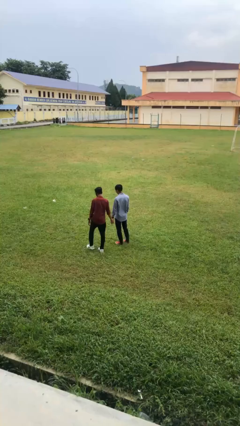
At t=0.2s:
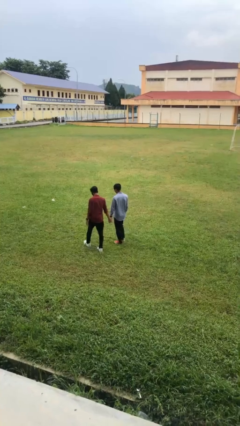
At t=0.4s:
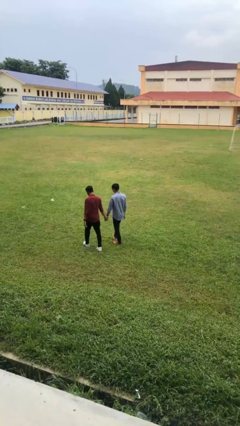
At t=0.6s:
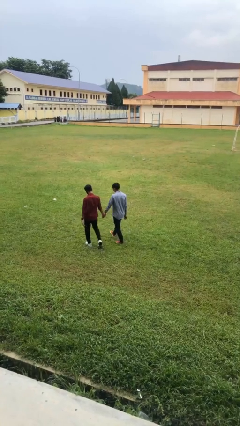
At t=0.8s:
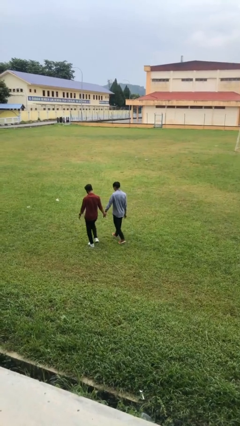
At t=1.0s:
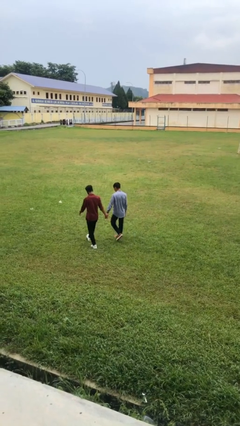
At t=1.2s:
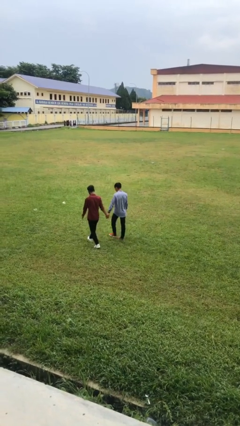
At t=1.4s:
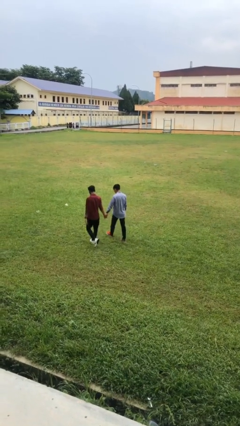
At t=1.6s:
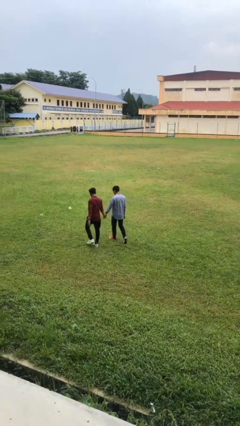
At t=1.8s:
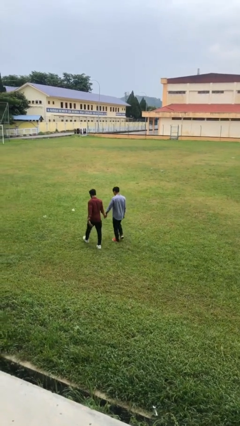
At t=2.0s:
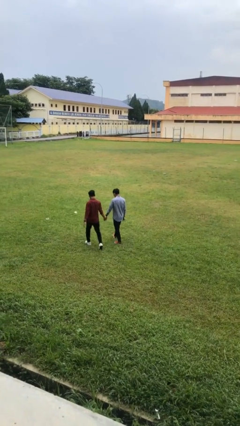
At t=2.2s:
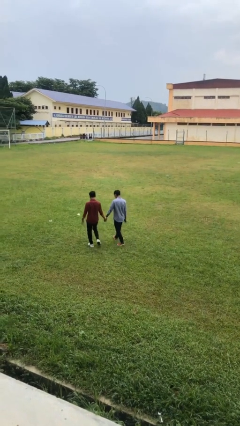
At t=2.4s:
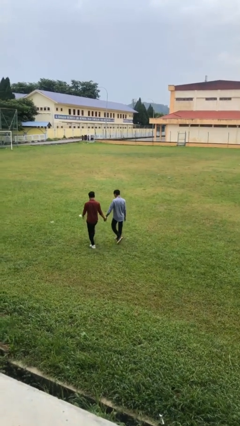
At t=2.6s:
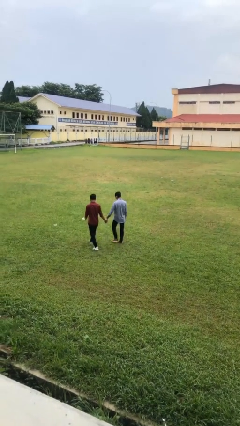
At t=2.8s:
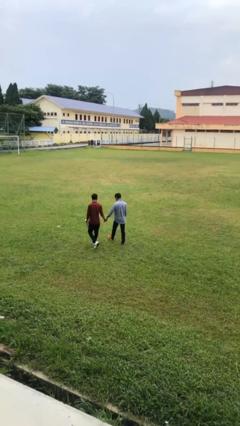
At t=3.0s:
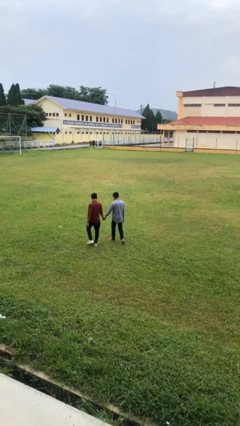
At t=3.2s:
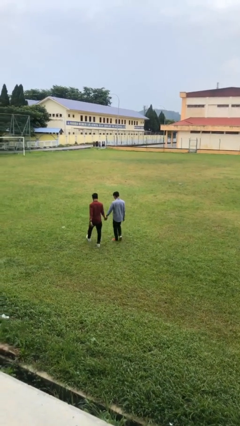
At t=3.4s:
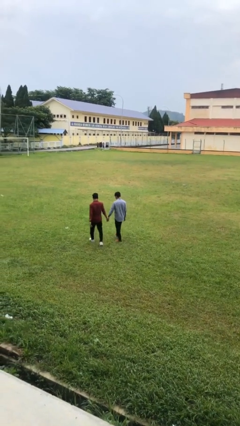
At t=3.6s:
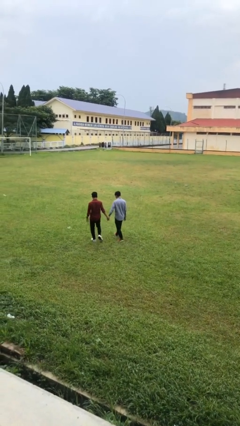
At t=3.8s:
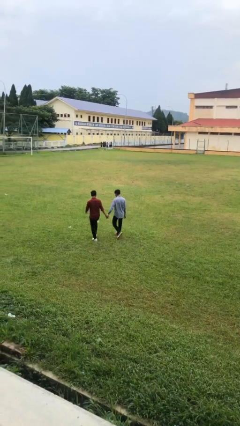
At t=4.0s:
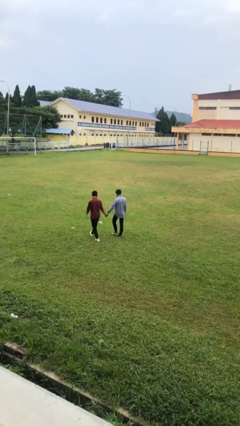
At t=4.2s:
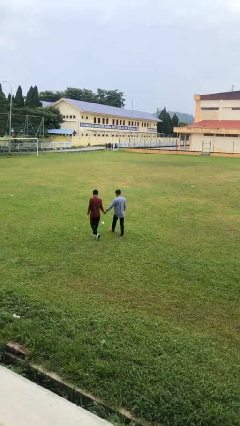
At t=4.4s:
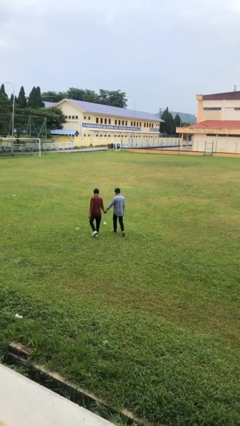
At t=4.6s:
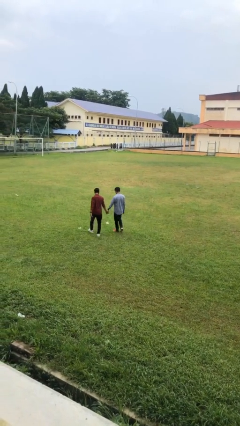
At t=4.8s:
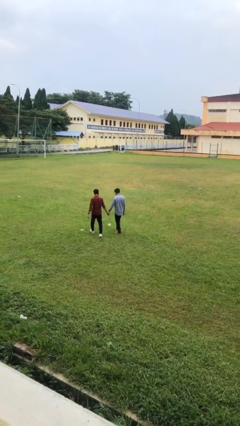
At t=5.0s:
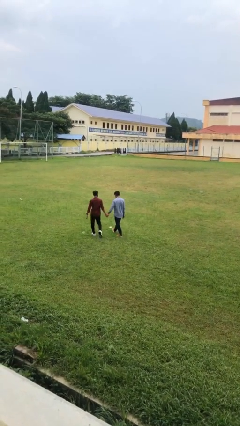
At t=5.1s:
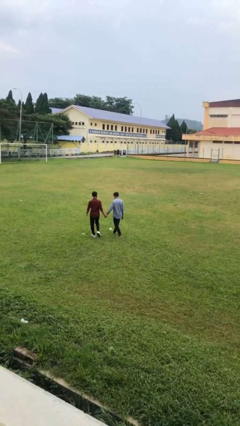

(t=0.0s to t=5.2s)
person holds hand

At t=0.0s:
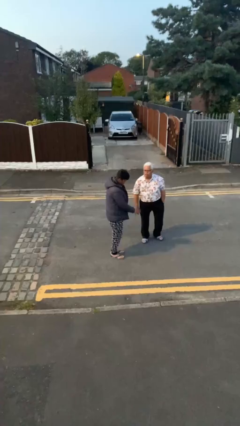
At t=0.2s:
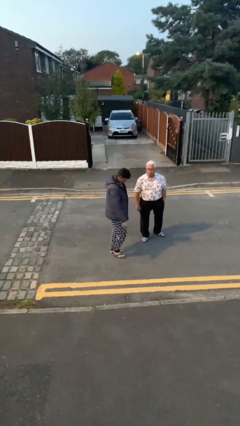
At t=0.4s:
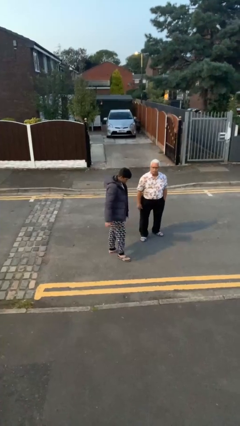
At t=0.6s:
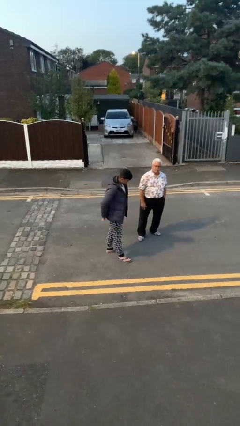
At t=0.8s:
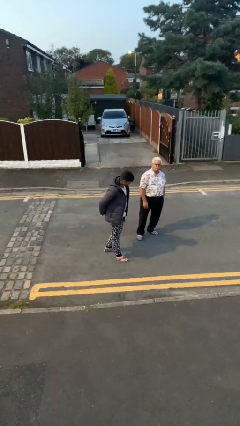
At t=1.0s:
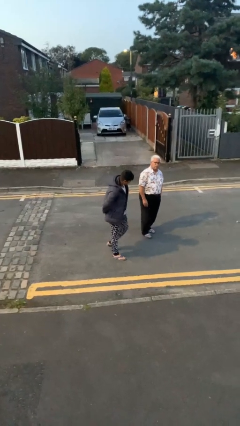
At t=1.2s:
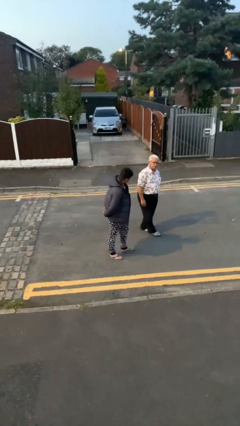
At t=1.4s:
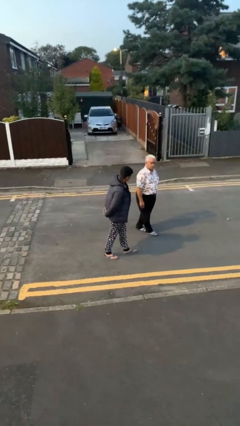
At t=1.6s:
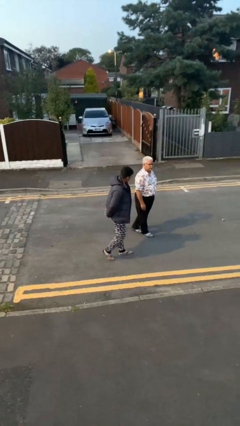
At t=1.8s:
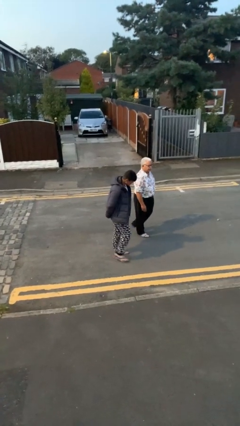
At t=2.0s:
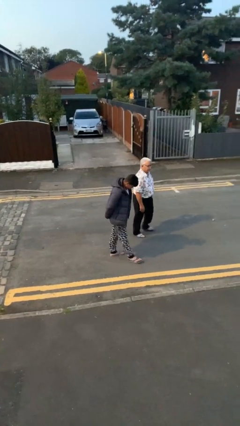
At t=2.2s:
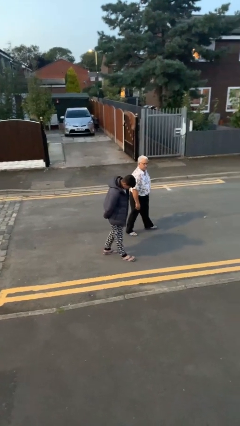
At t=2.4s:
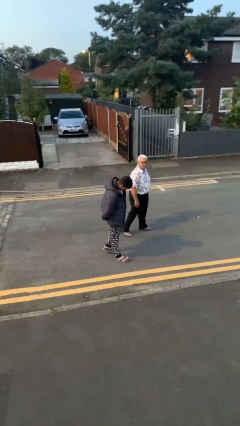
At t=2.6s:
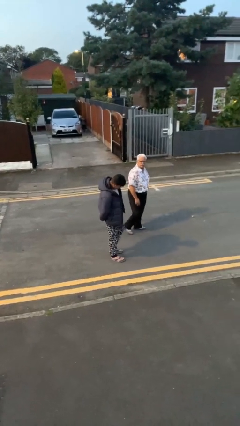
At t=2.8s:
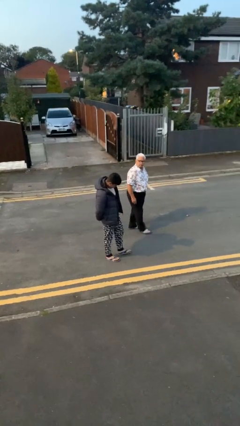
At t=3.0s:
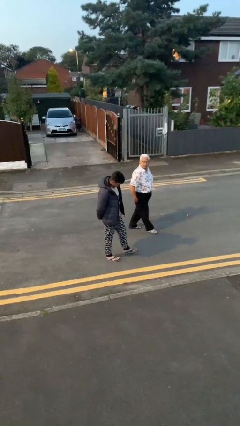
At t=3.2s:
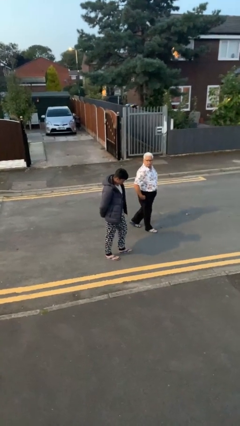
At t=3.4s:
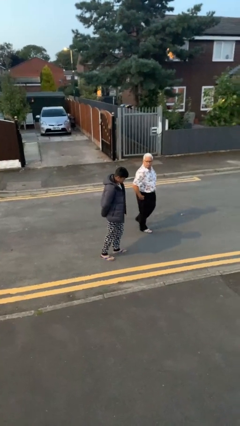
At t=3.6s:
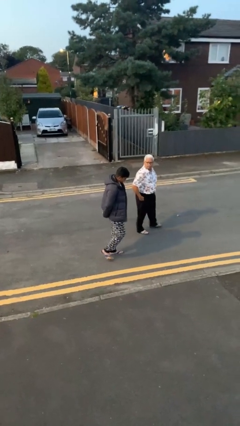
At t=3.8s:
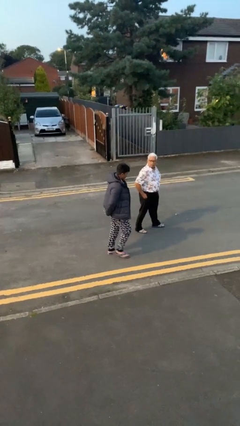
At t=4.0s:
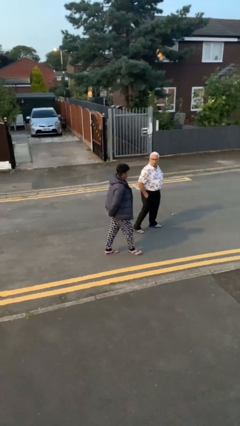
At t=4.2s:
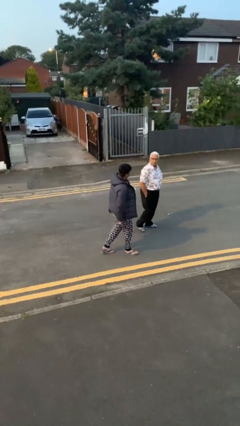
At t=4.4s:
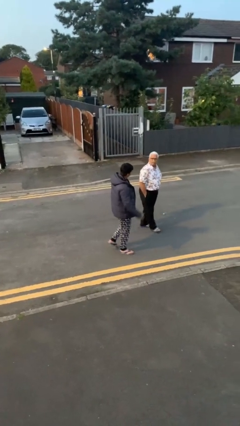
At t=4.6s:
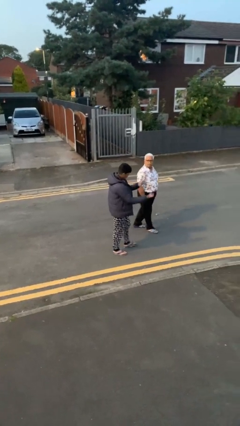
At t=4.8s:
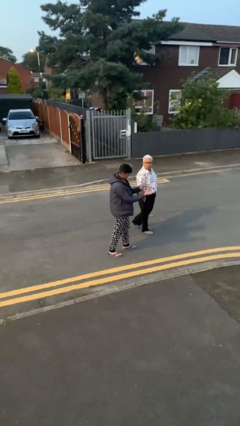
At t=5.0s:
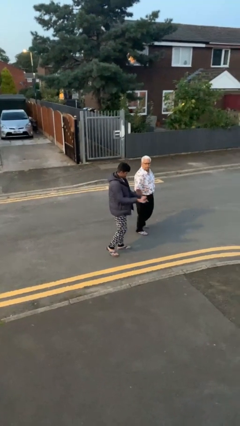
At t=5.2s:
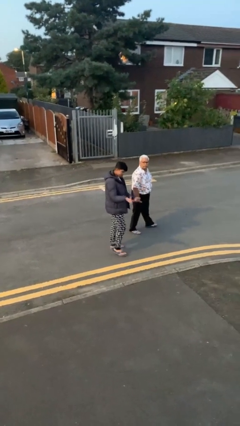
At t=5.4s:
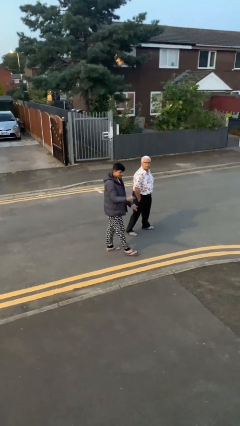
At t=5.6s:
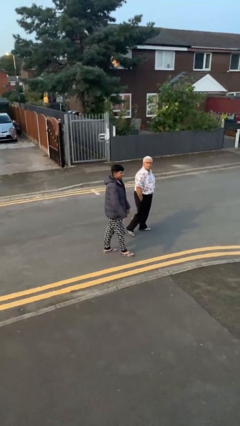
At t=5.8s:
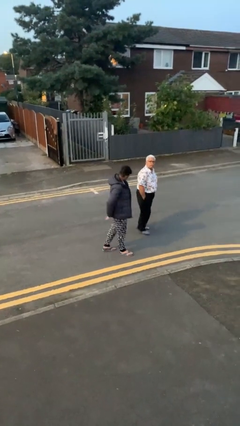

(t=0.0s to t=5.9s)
person talks to person

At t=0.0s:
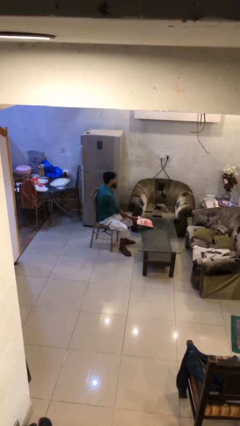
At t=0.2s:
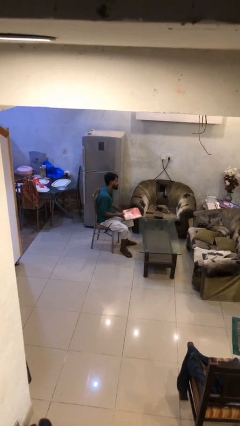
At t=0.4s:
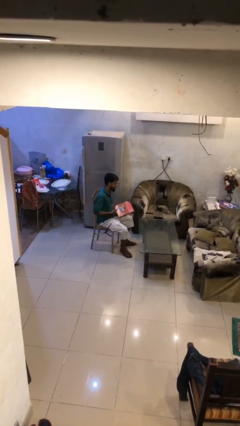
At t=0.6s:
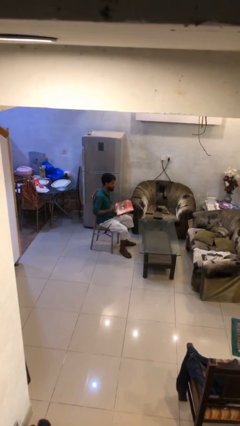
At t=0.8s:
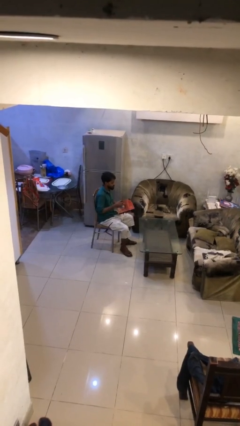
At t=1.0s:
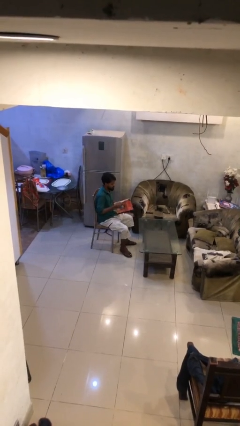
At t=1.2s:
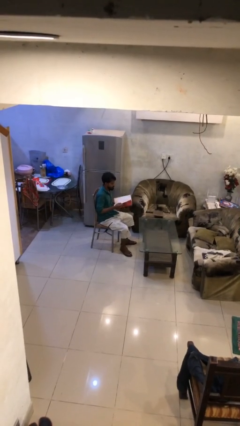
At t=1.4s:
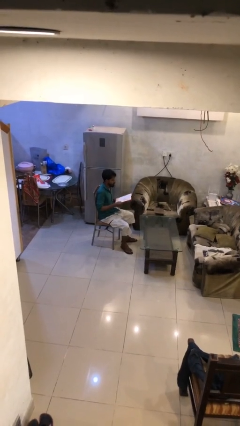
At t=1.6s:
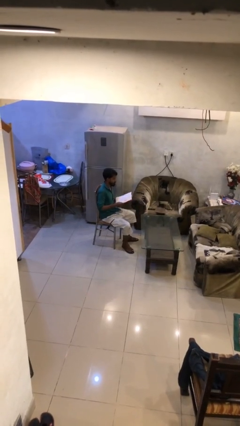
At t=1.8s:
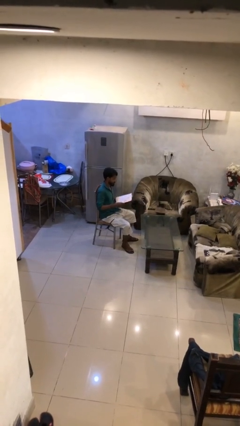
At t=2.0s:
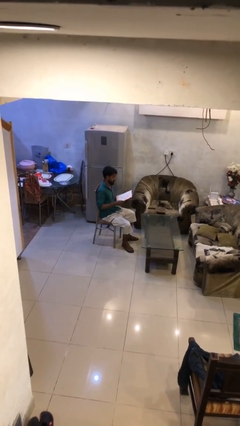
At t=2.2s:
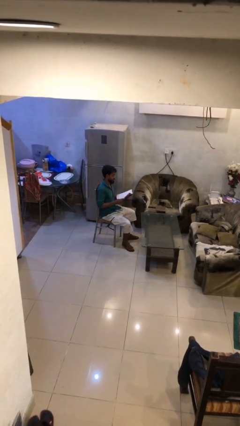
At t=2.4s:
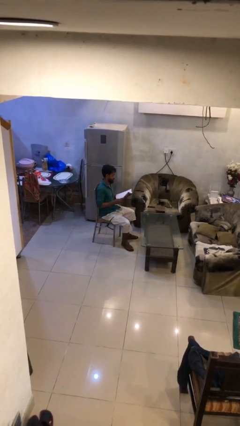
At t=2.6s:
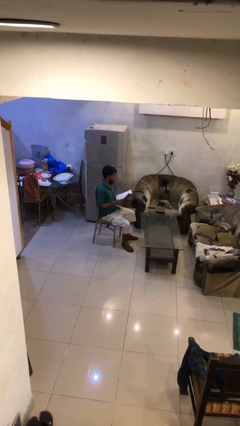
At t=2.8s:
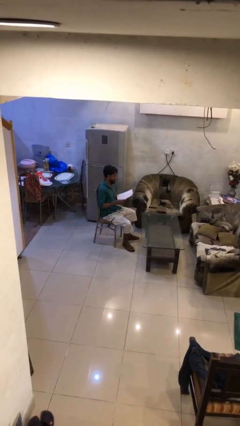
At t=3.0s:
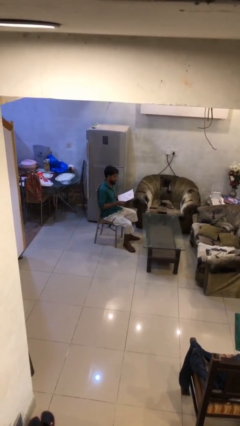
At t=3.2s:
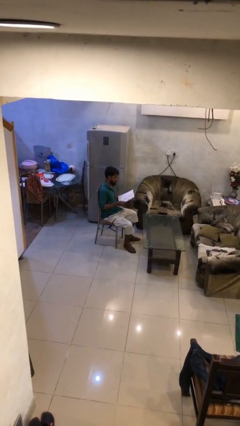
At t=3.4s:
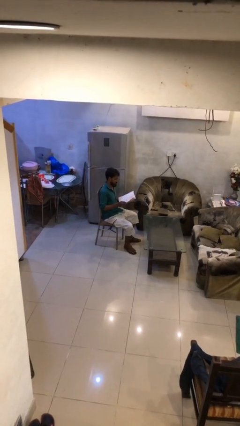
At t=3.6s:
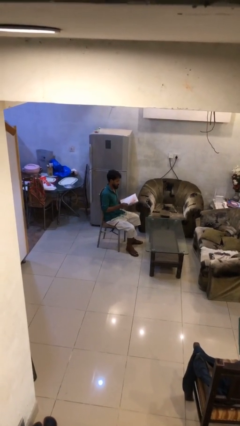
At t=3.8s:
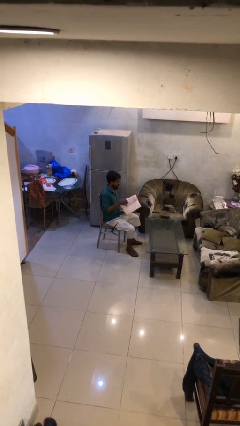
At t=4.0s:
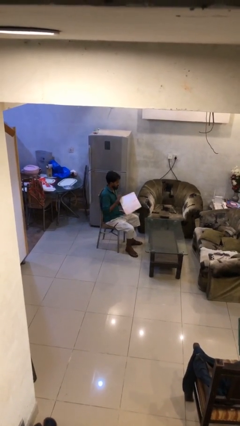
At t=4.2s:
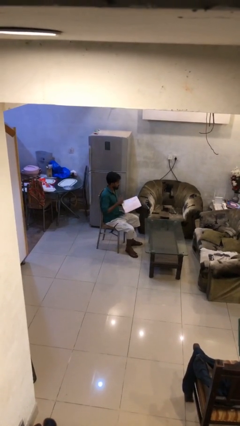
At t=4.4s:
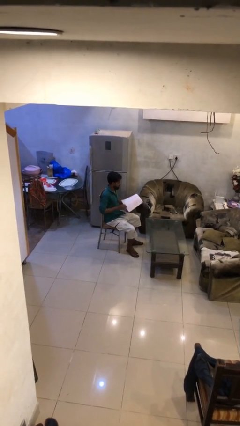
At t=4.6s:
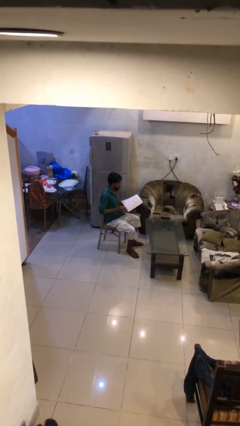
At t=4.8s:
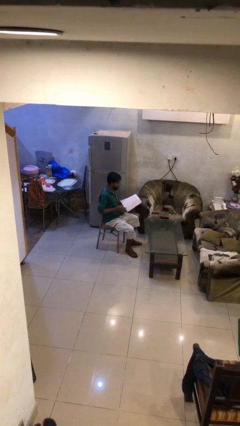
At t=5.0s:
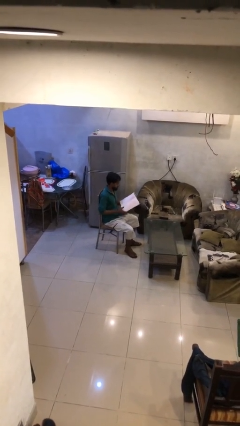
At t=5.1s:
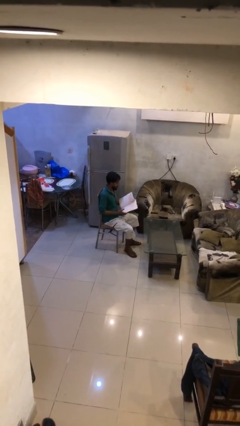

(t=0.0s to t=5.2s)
person reads document

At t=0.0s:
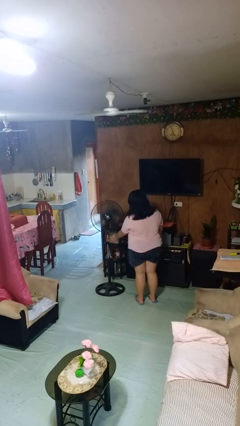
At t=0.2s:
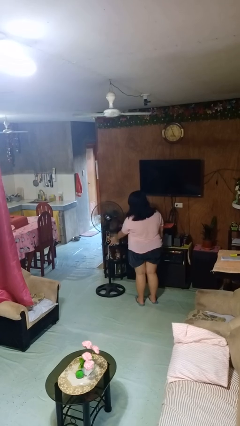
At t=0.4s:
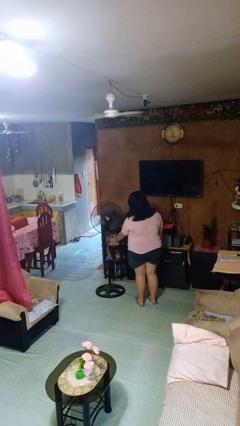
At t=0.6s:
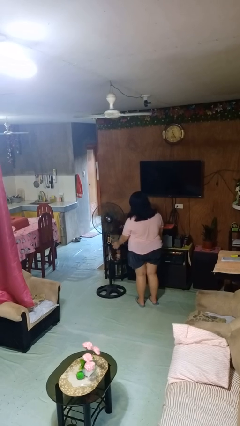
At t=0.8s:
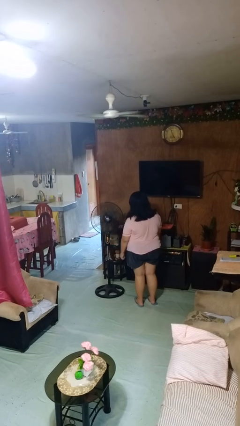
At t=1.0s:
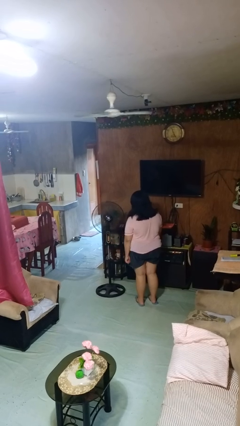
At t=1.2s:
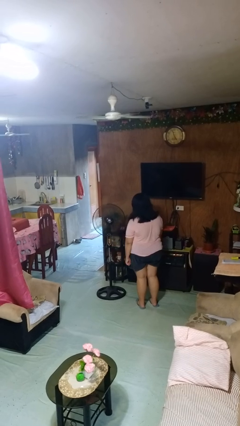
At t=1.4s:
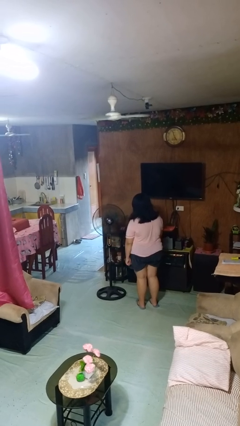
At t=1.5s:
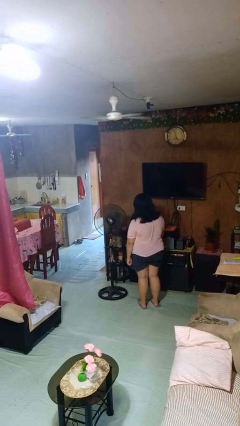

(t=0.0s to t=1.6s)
person turns on fan
